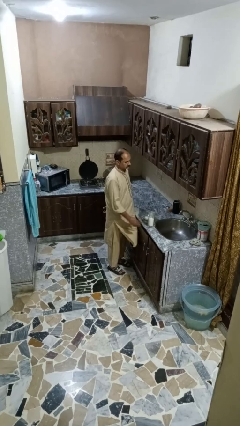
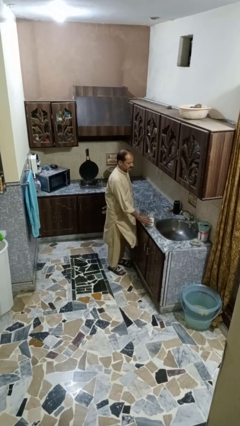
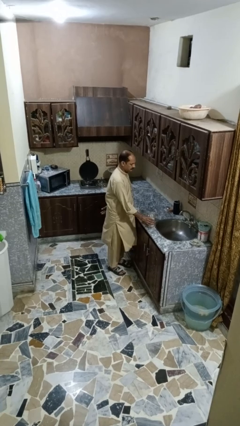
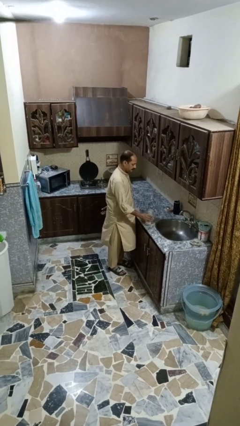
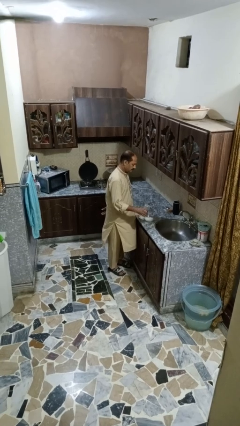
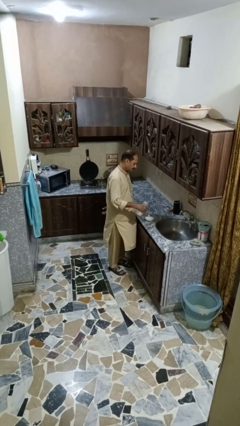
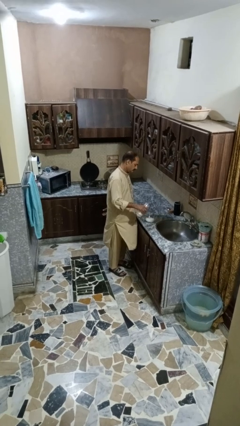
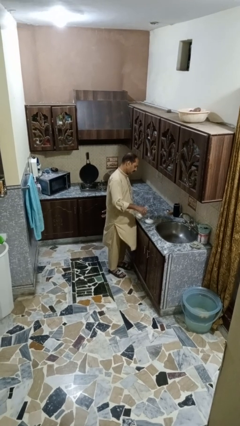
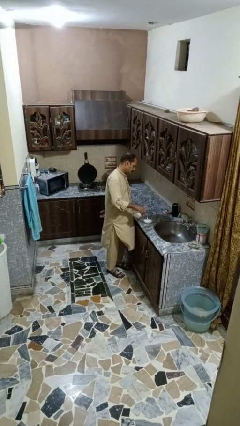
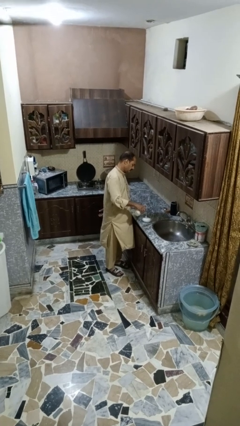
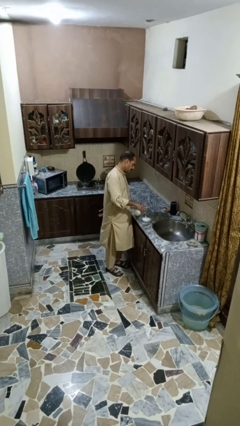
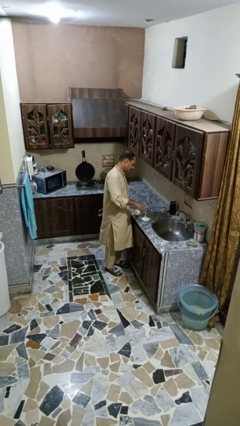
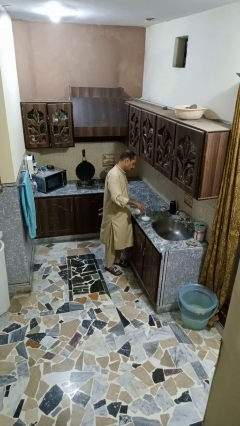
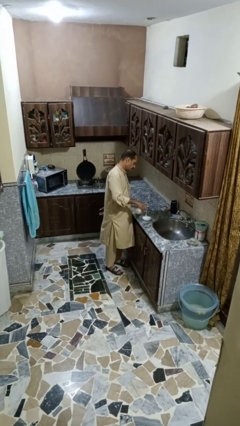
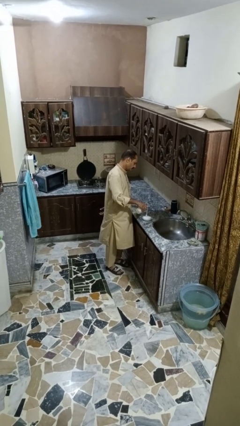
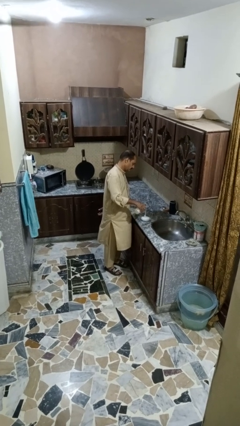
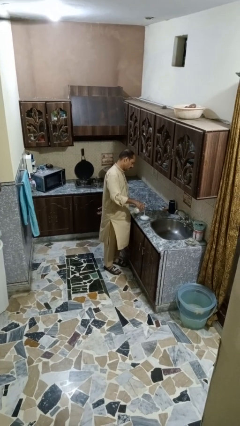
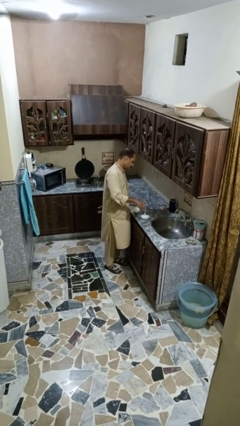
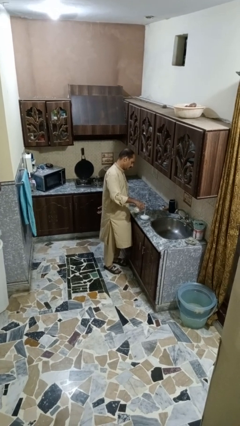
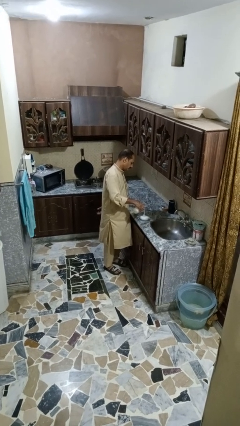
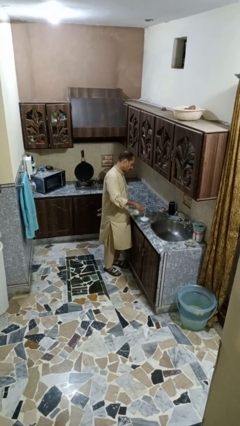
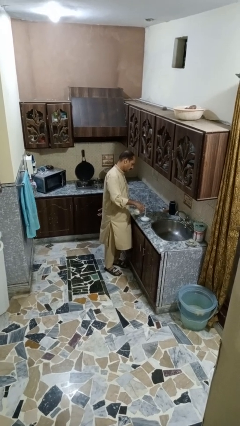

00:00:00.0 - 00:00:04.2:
person pours into bowl

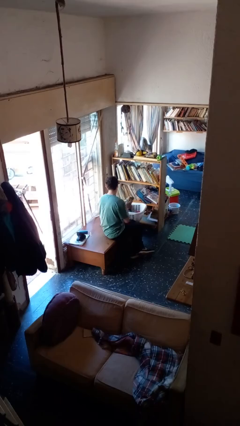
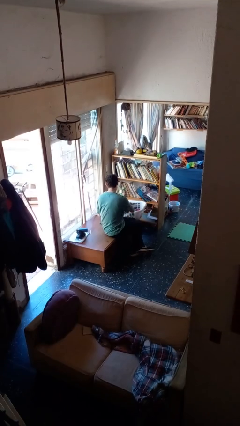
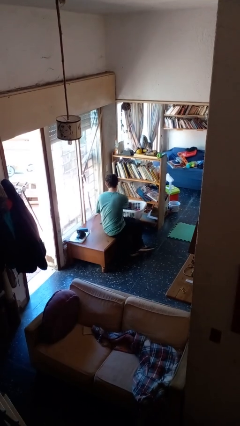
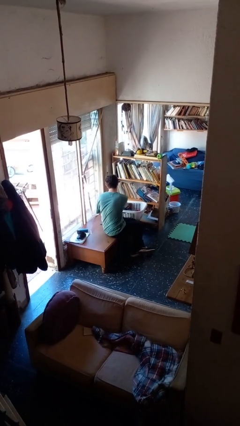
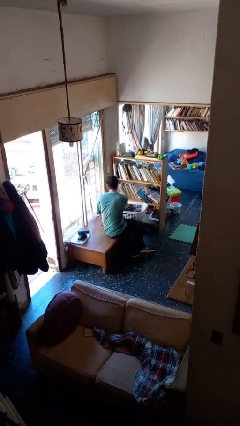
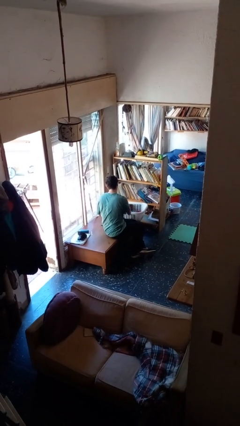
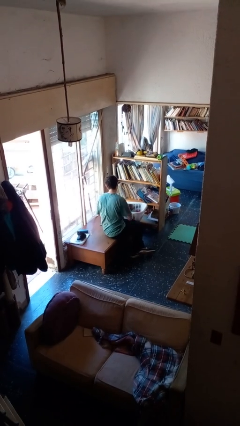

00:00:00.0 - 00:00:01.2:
person puts object into basket

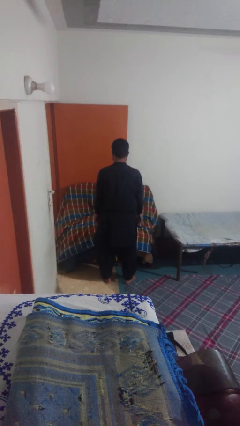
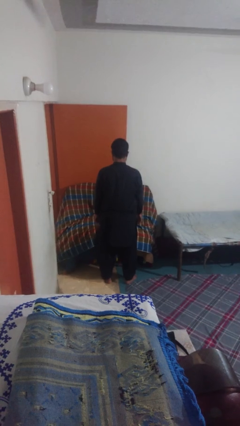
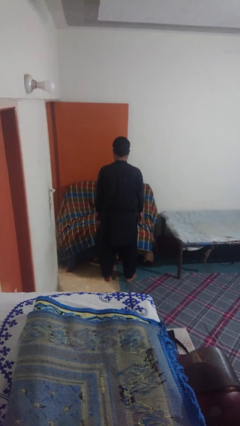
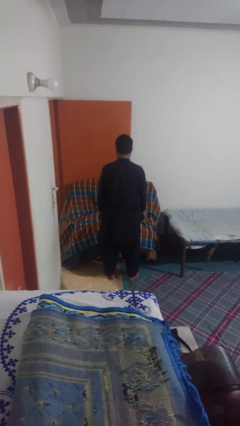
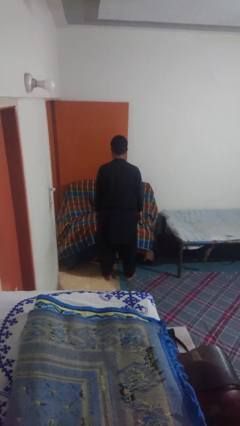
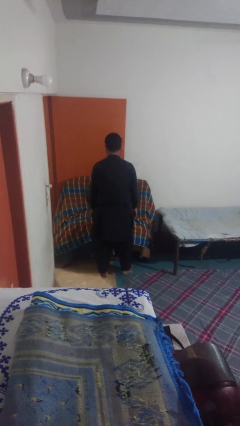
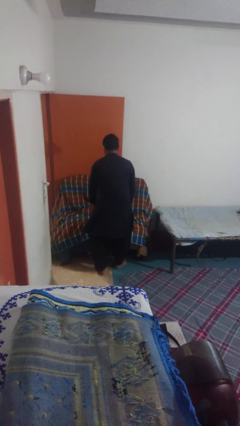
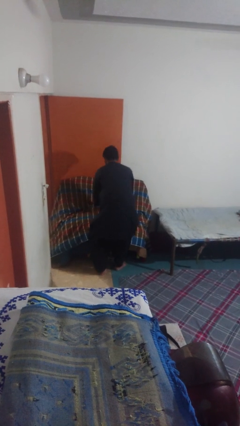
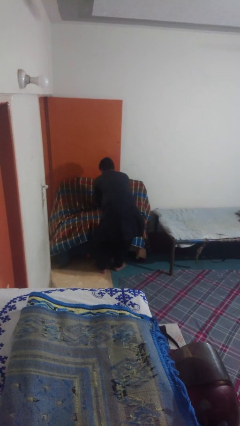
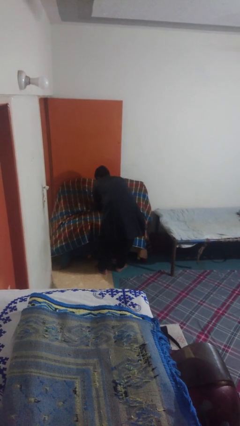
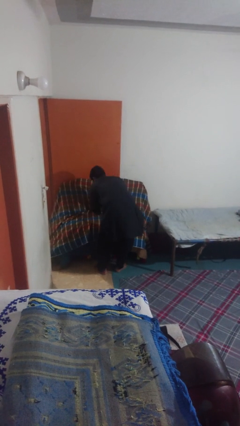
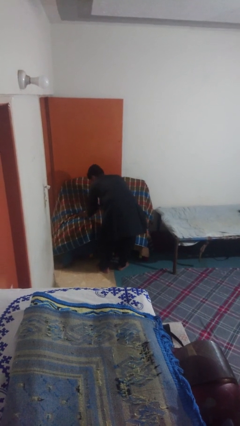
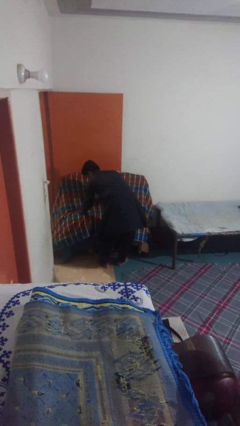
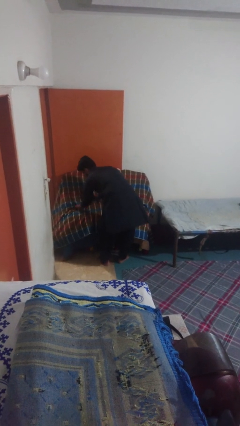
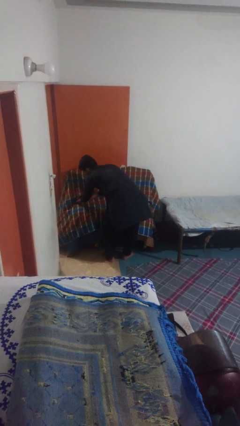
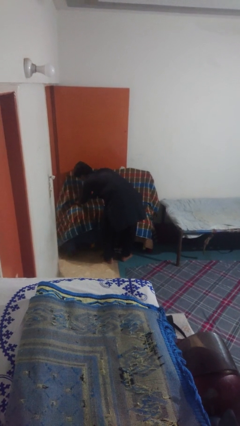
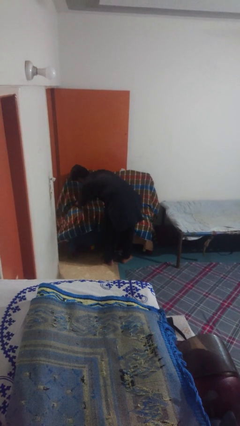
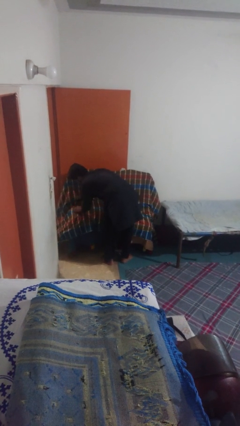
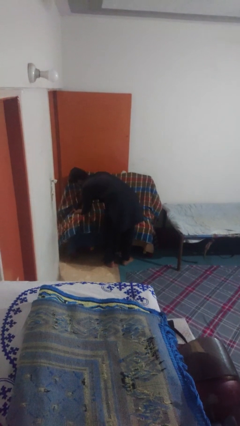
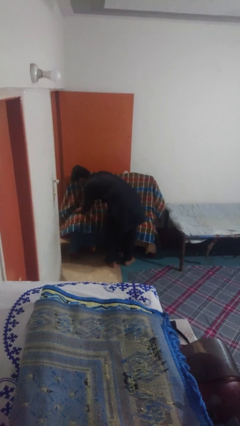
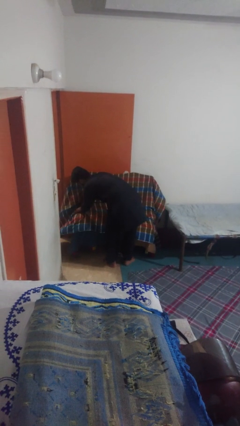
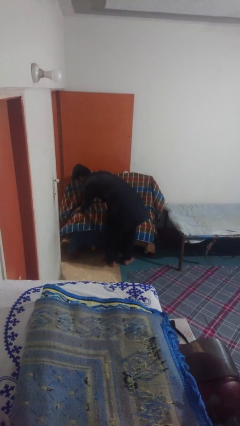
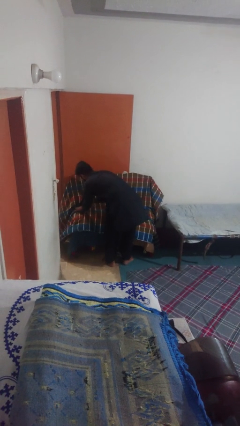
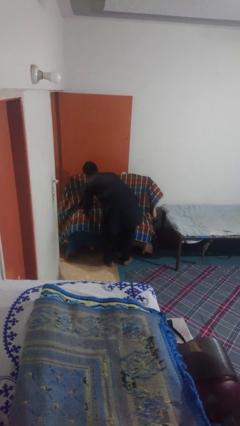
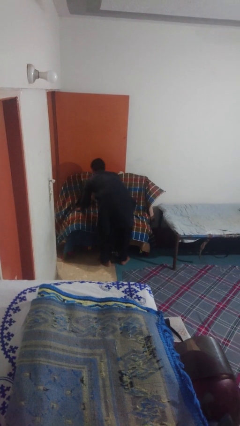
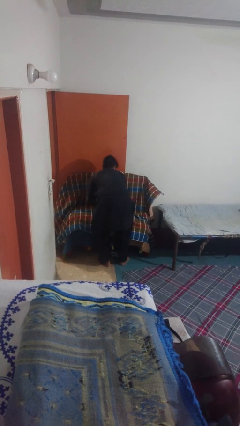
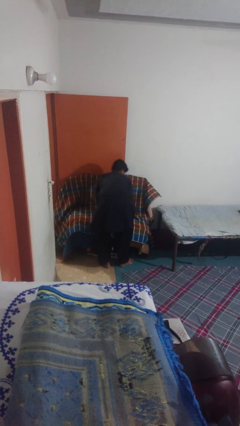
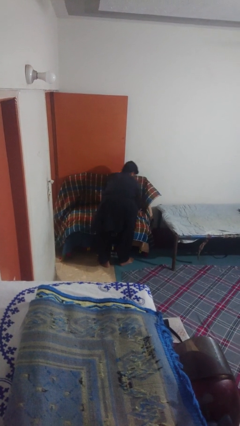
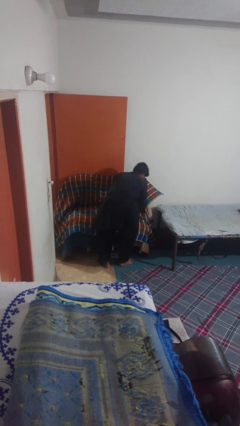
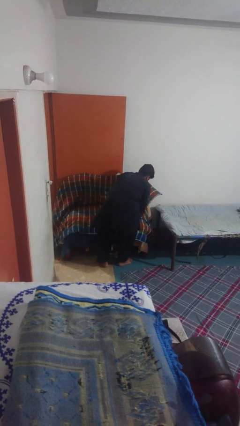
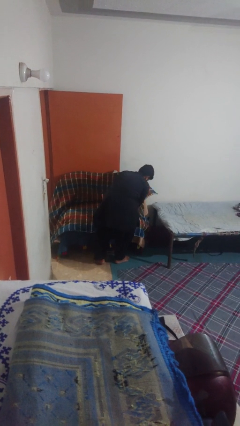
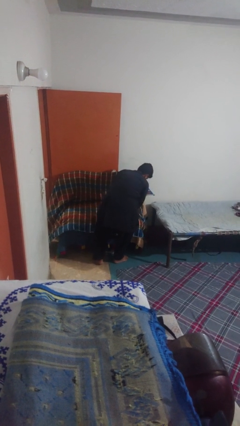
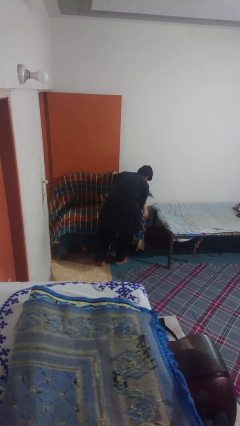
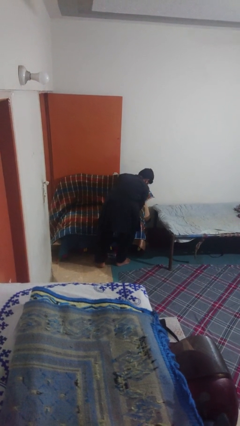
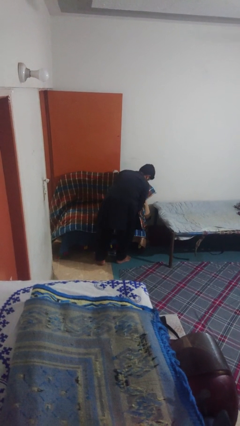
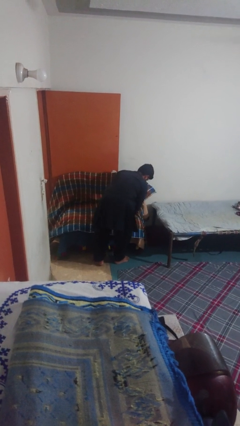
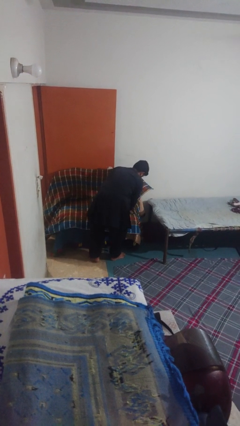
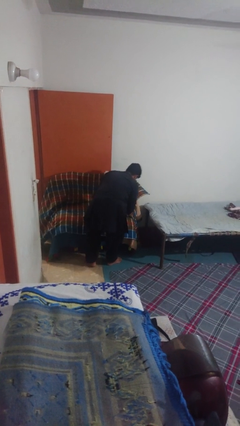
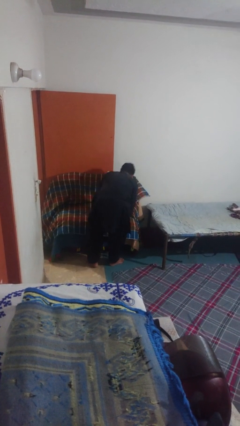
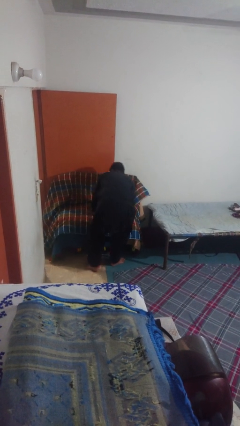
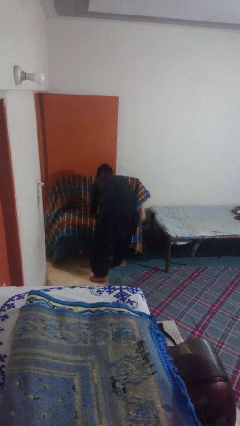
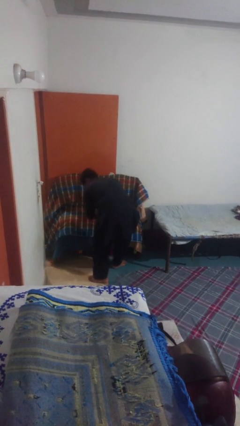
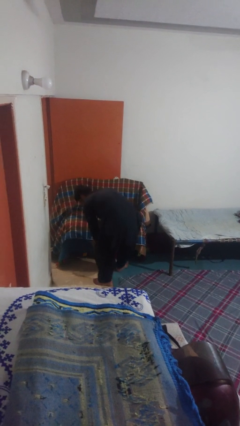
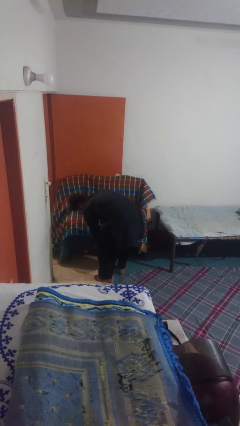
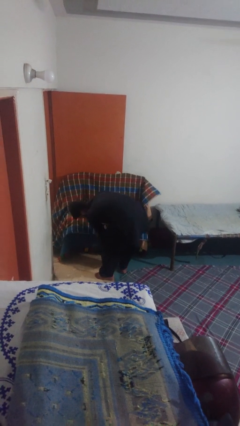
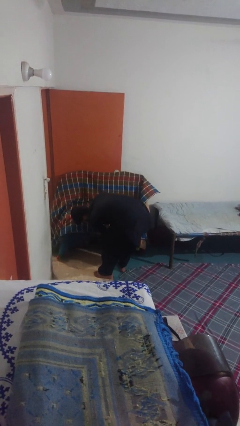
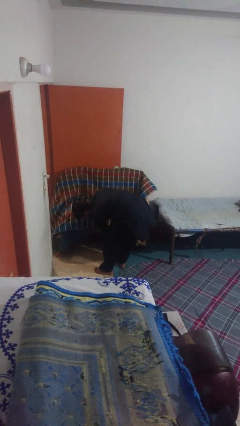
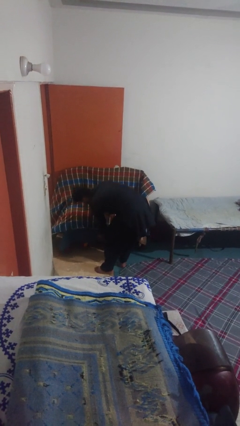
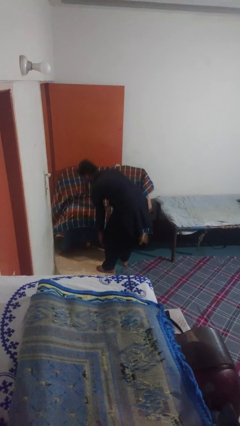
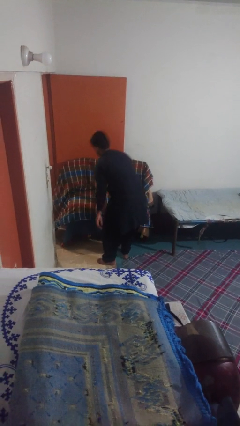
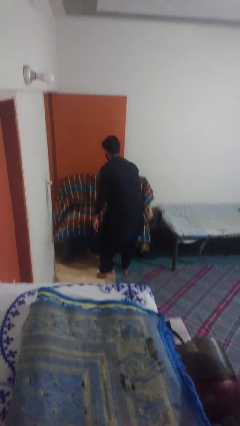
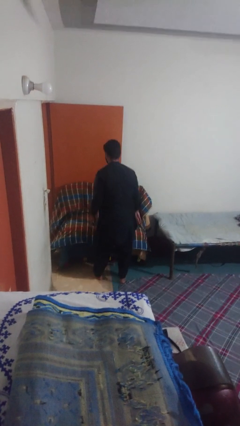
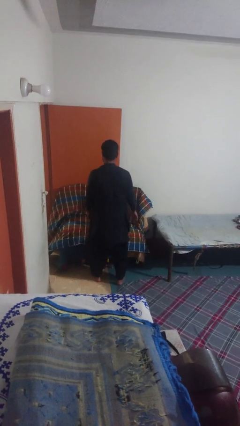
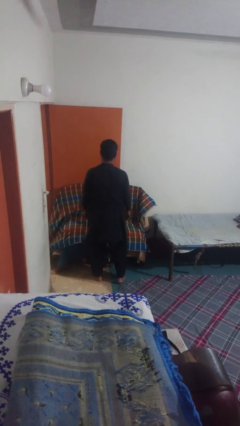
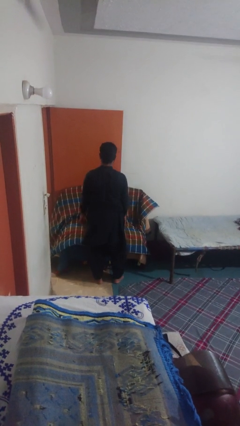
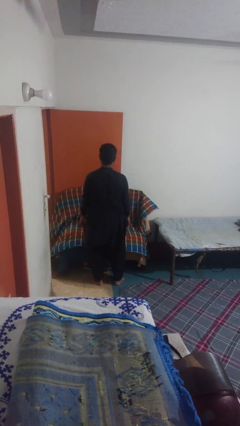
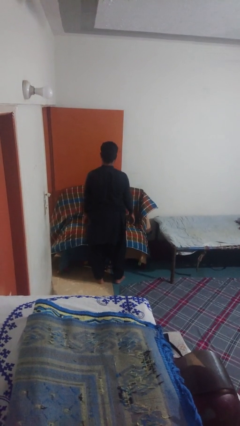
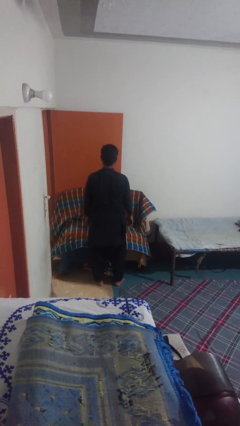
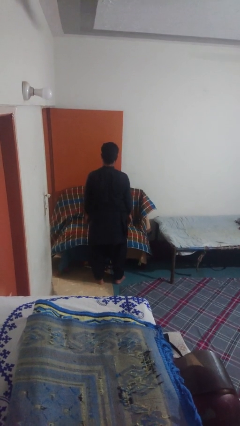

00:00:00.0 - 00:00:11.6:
person searches in couch

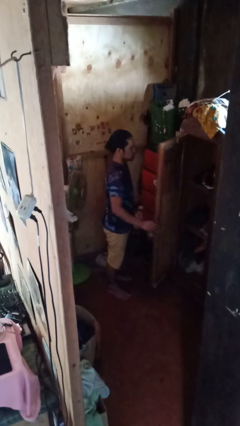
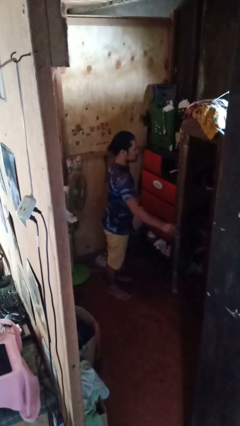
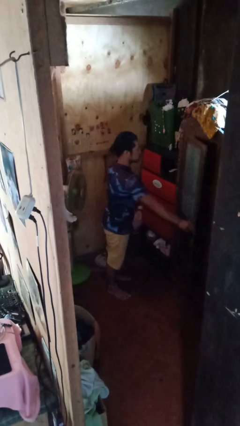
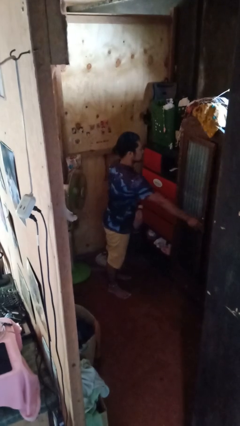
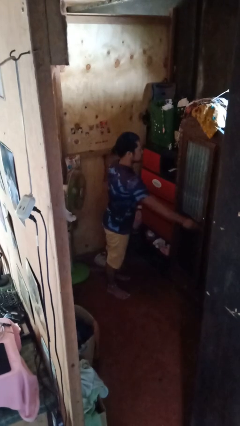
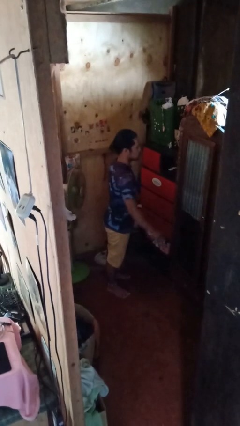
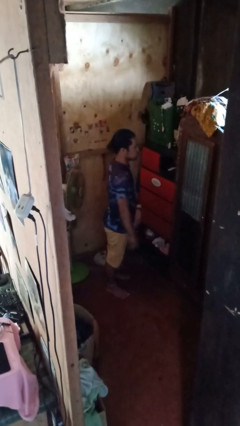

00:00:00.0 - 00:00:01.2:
person closes closet door
